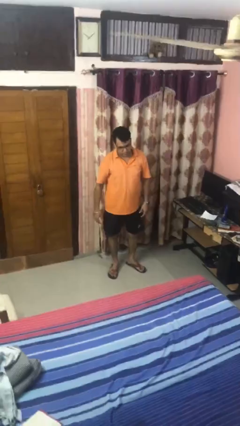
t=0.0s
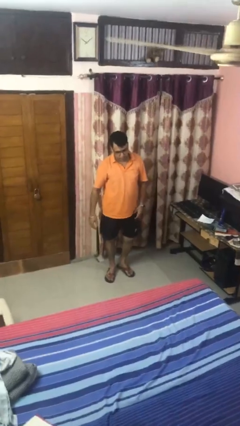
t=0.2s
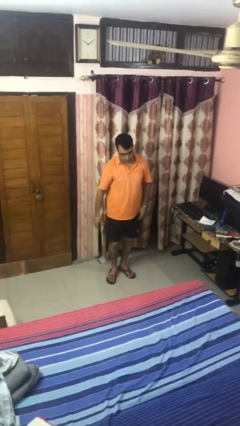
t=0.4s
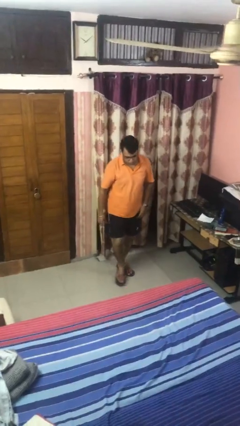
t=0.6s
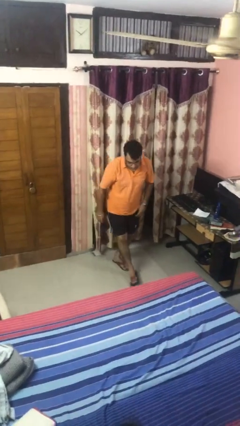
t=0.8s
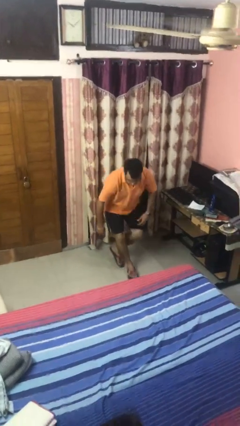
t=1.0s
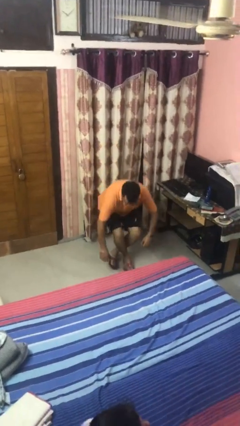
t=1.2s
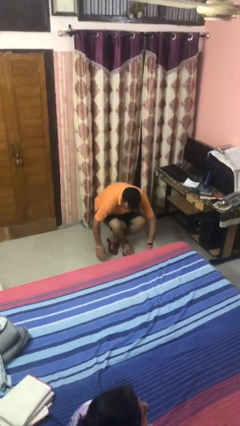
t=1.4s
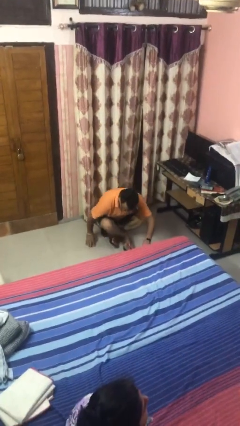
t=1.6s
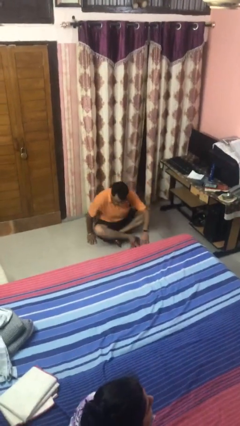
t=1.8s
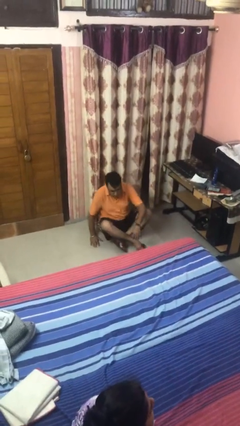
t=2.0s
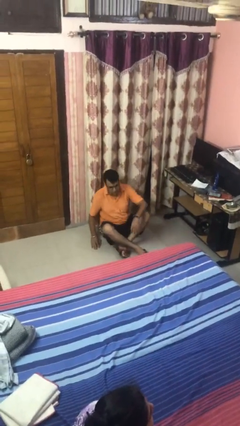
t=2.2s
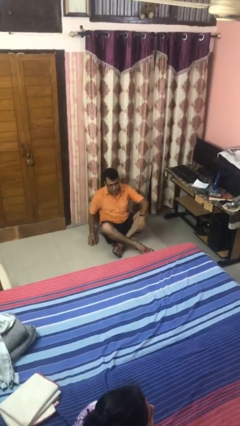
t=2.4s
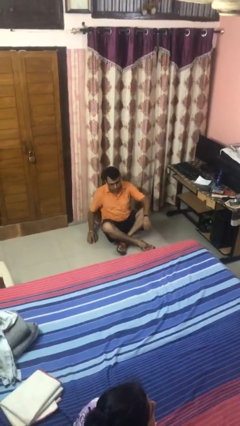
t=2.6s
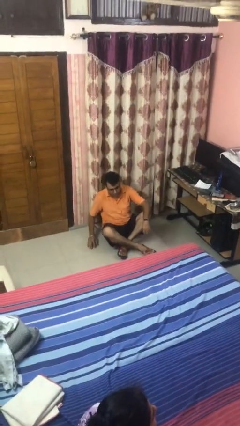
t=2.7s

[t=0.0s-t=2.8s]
person sits crisscross

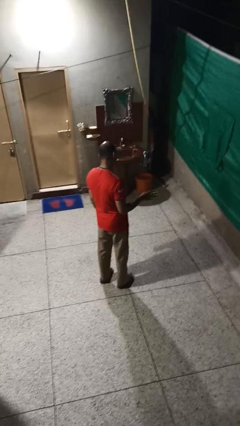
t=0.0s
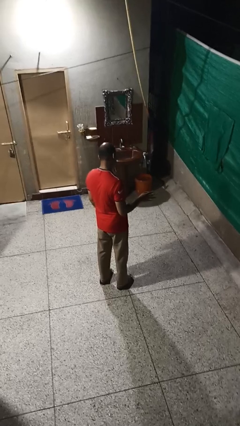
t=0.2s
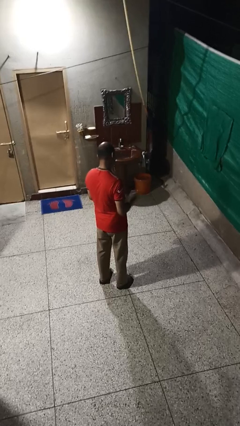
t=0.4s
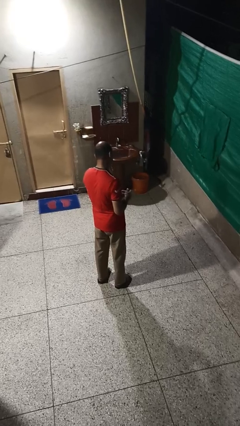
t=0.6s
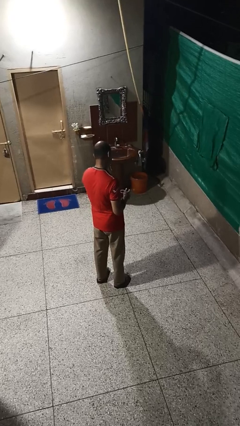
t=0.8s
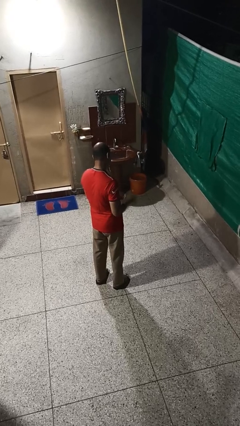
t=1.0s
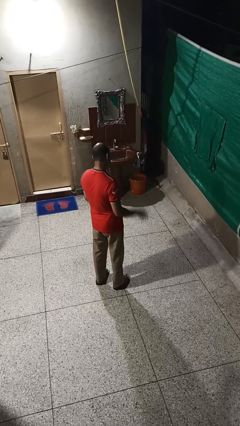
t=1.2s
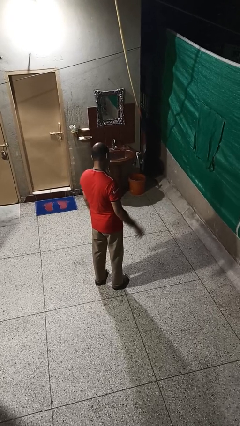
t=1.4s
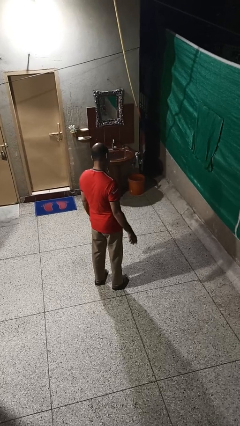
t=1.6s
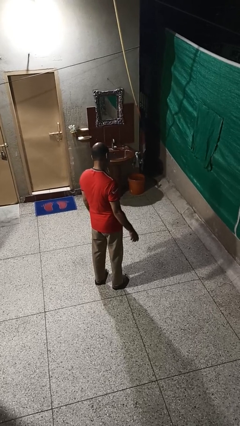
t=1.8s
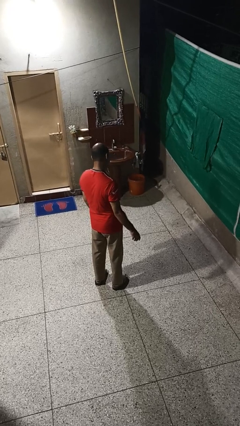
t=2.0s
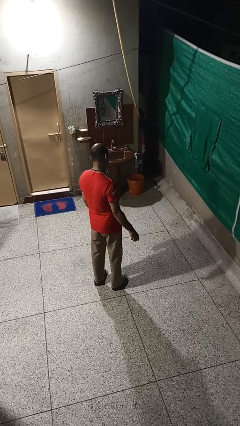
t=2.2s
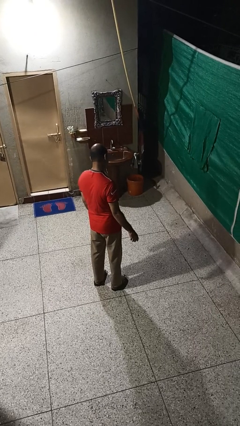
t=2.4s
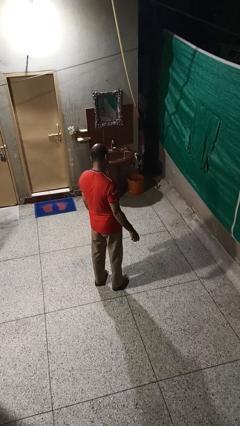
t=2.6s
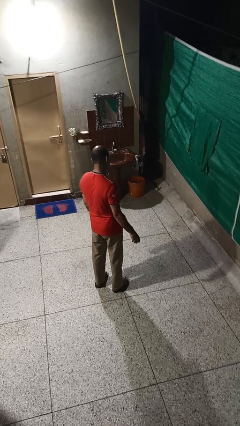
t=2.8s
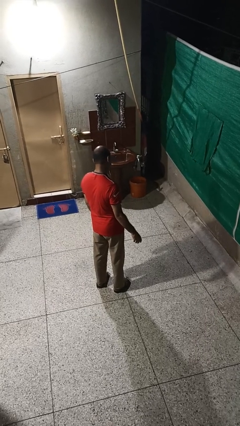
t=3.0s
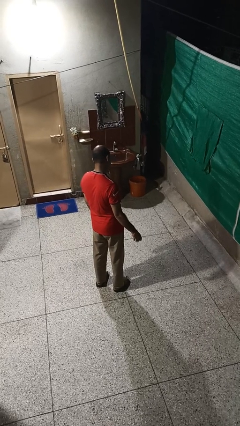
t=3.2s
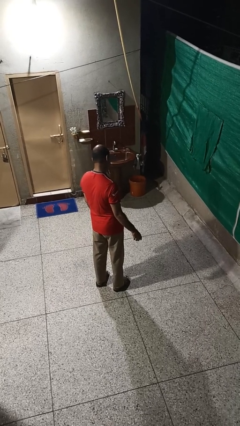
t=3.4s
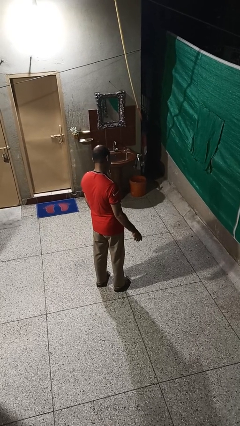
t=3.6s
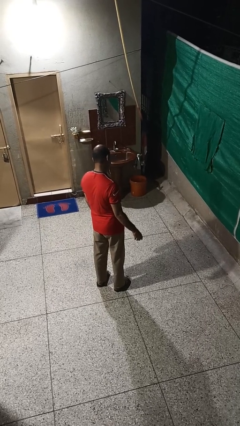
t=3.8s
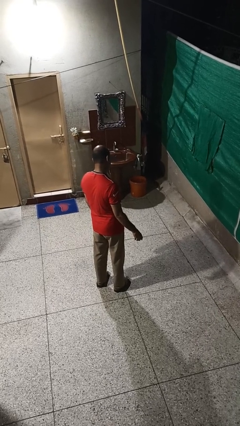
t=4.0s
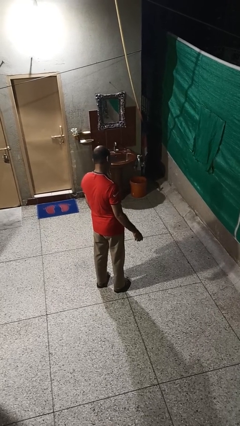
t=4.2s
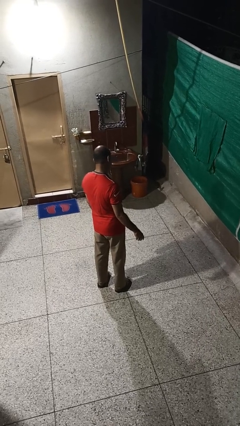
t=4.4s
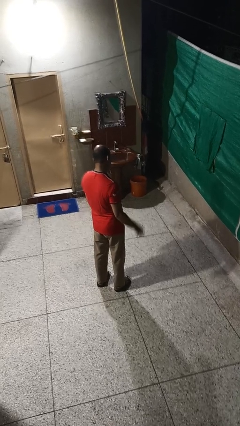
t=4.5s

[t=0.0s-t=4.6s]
person takes off ring

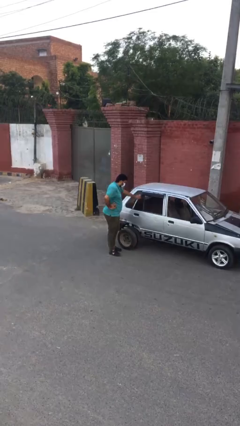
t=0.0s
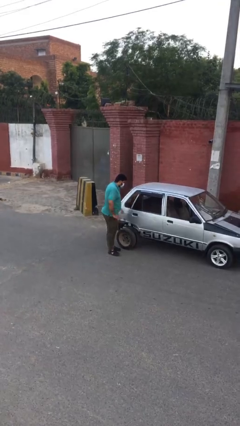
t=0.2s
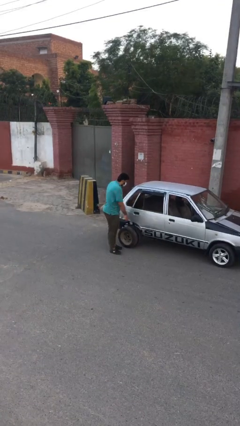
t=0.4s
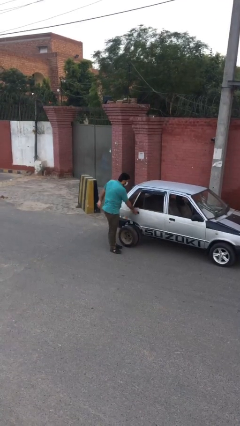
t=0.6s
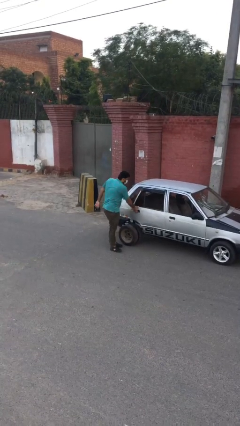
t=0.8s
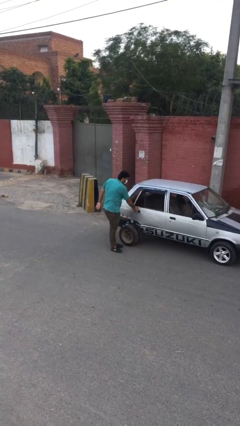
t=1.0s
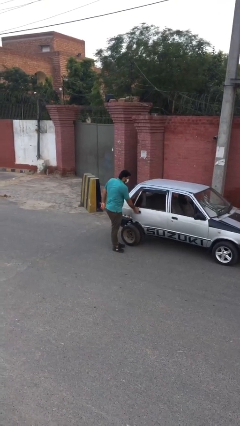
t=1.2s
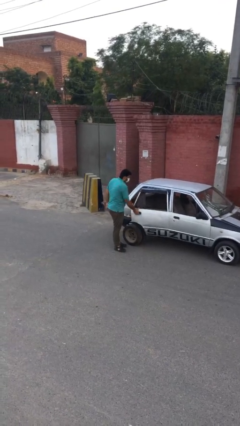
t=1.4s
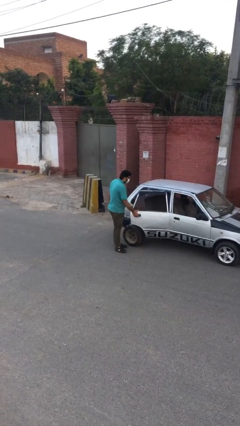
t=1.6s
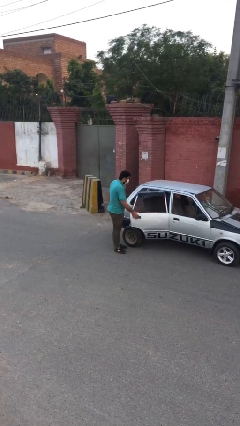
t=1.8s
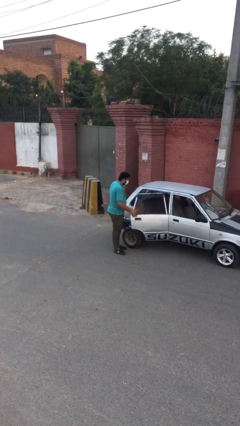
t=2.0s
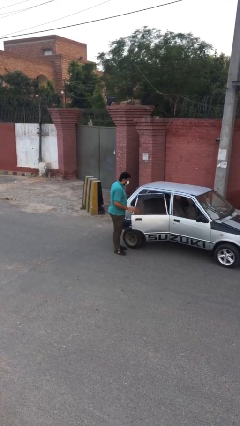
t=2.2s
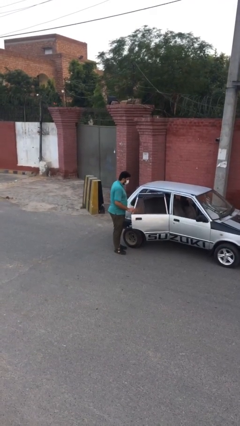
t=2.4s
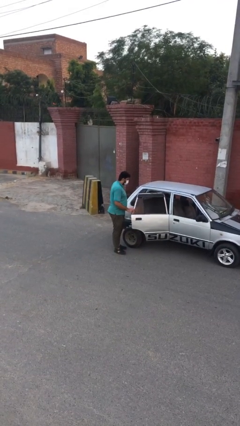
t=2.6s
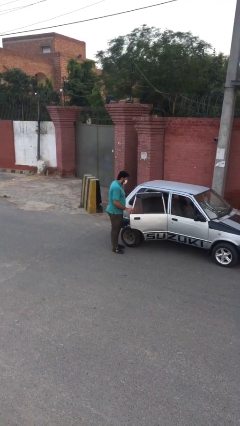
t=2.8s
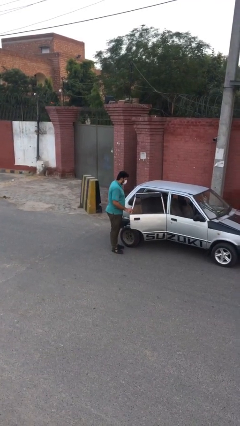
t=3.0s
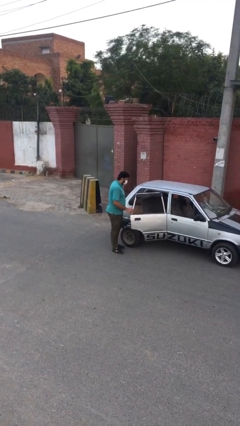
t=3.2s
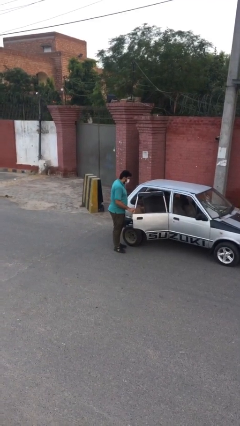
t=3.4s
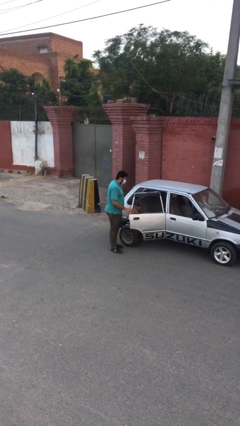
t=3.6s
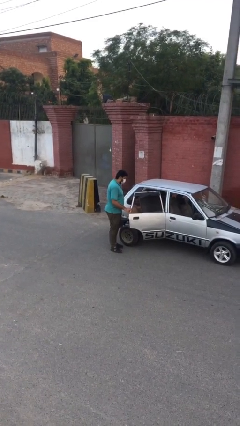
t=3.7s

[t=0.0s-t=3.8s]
person opens car door

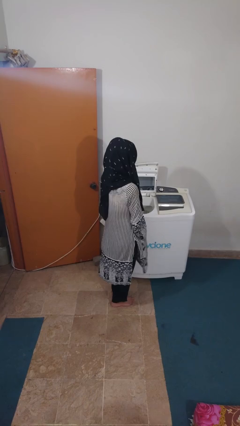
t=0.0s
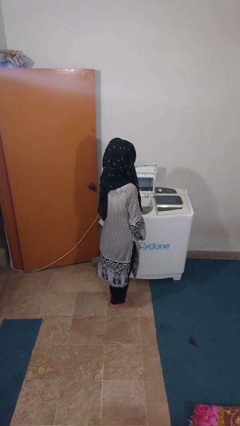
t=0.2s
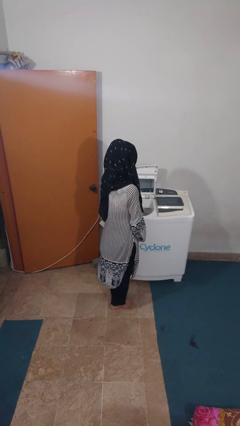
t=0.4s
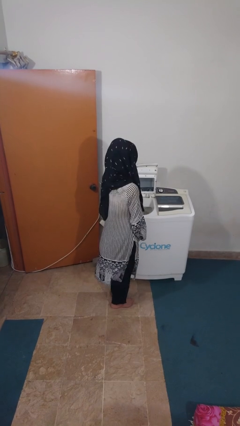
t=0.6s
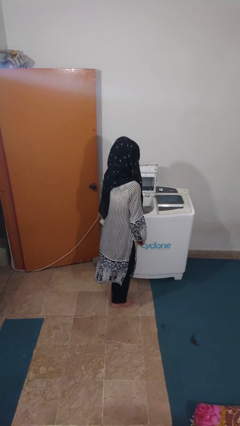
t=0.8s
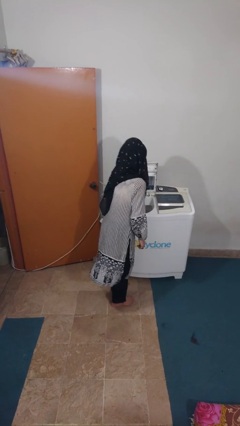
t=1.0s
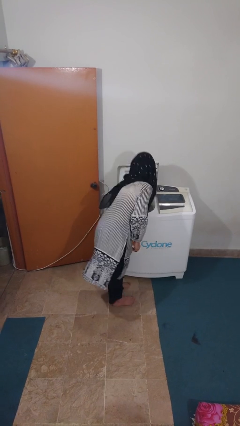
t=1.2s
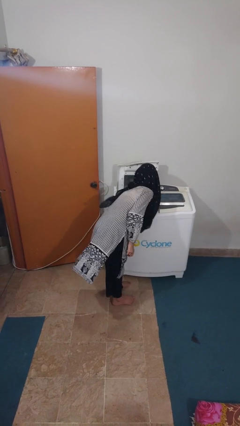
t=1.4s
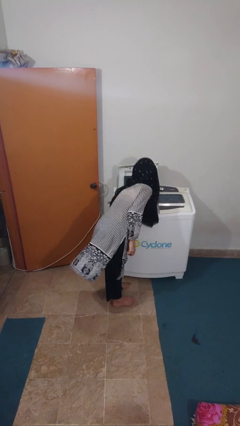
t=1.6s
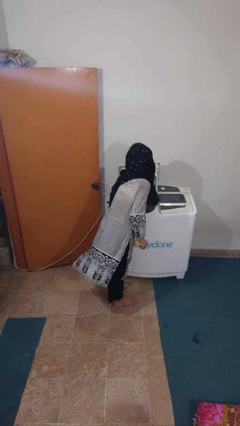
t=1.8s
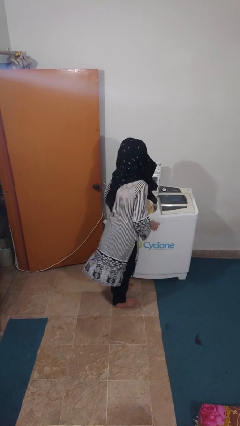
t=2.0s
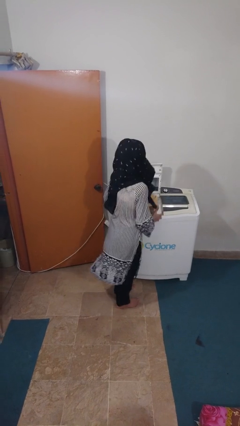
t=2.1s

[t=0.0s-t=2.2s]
person unloads clotheswasher

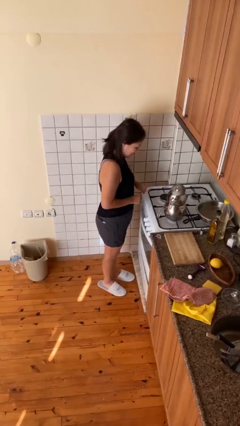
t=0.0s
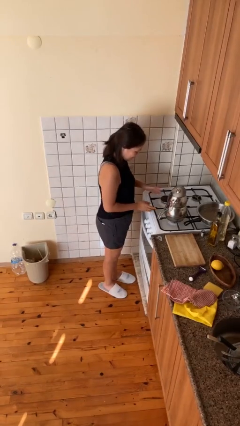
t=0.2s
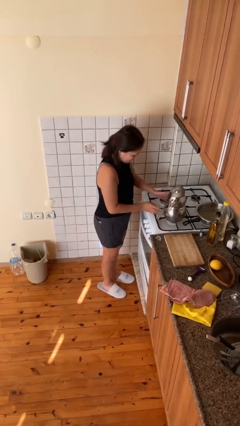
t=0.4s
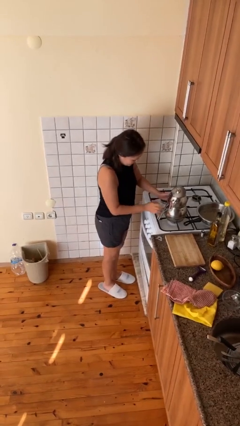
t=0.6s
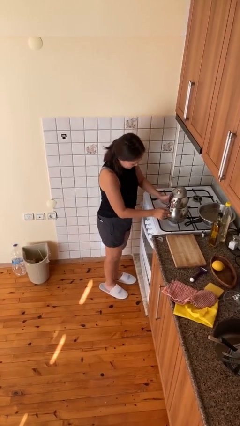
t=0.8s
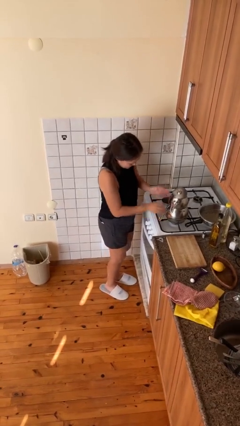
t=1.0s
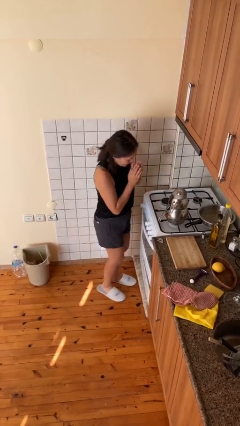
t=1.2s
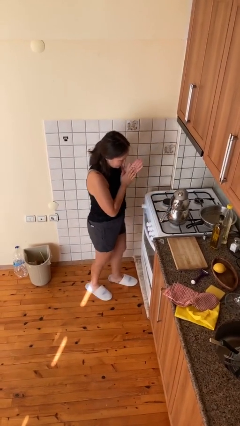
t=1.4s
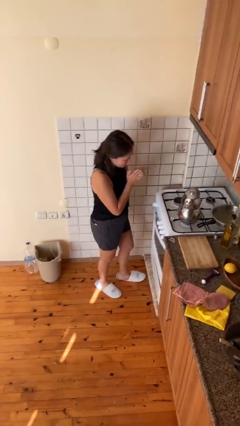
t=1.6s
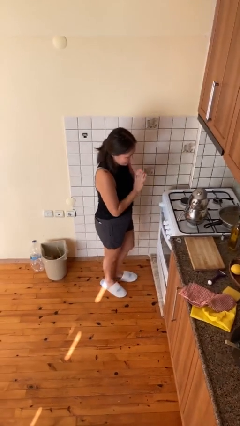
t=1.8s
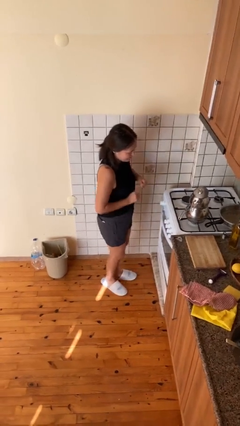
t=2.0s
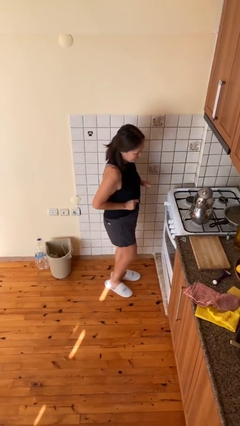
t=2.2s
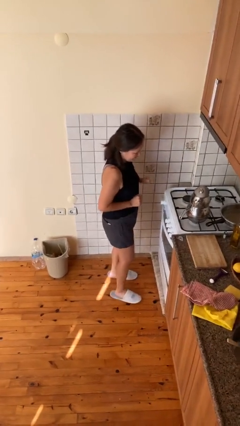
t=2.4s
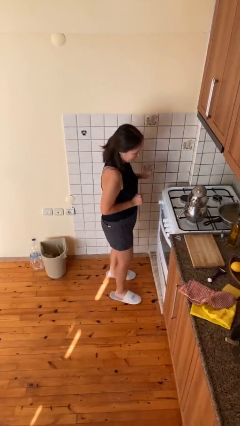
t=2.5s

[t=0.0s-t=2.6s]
person burns hand

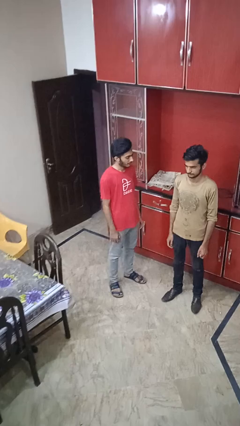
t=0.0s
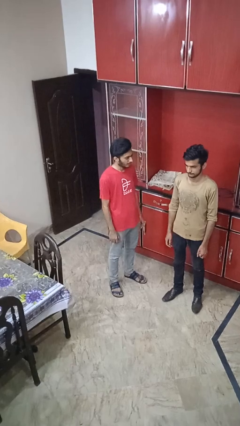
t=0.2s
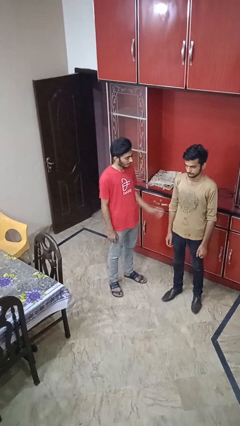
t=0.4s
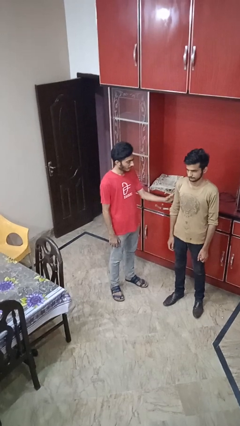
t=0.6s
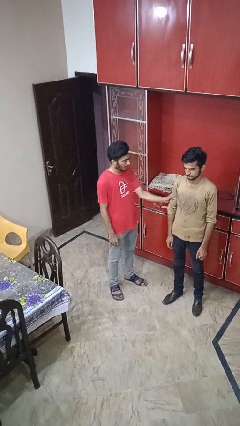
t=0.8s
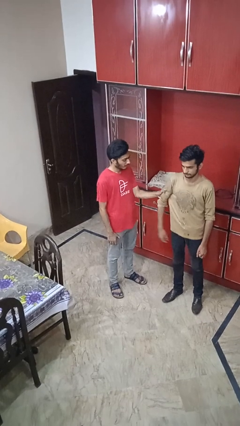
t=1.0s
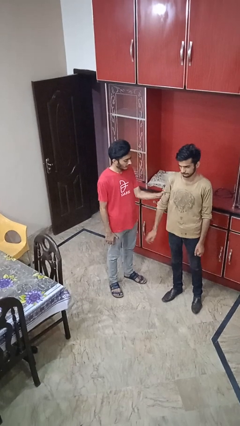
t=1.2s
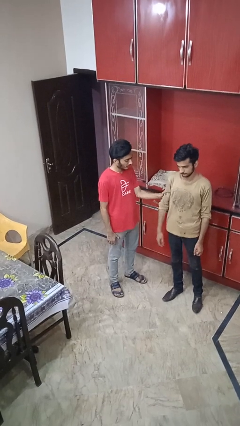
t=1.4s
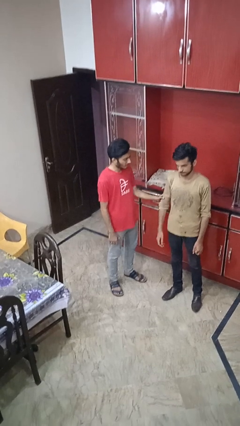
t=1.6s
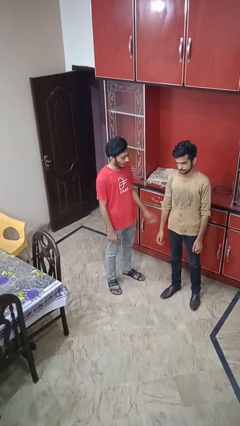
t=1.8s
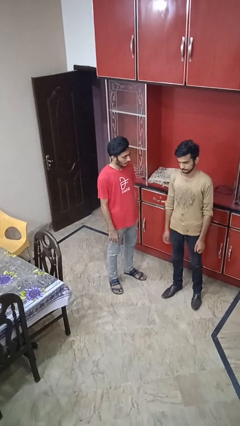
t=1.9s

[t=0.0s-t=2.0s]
person grabs person by bicep
